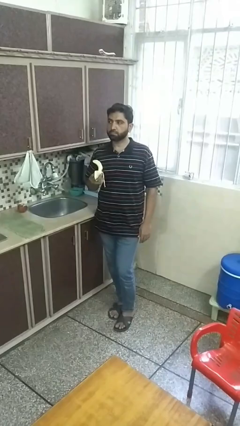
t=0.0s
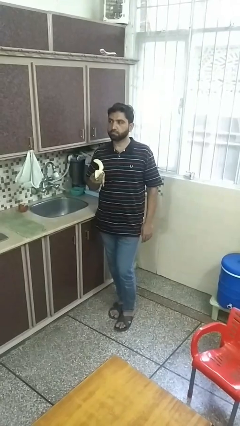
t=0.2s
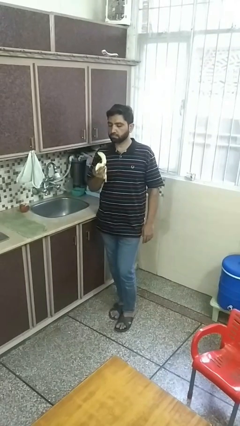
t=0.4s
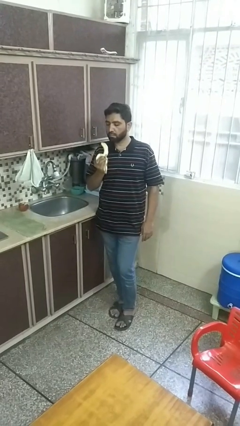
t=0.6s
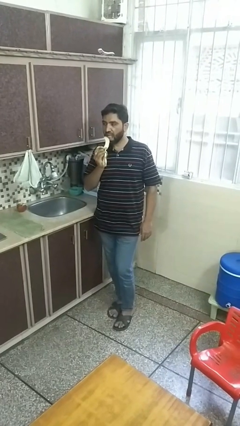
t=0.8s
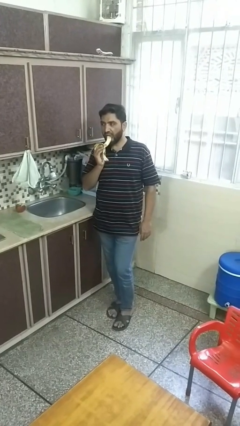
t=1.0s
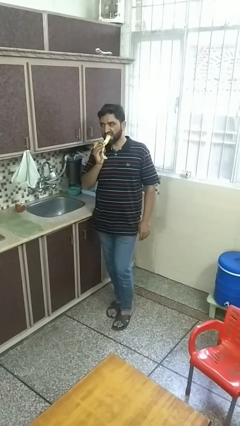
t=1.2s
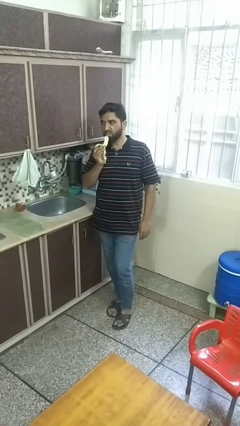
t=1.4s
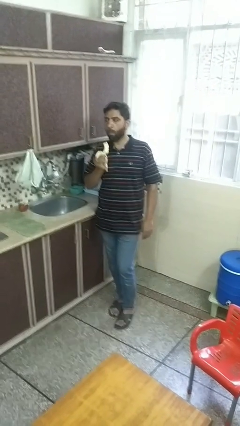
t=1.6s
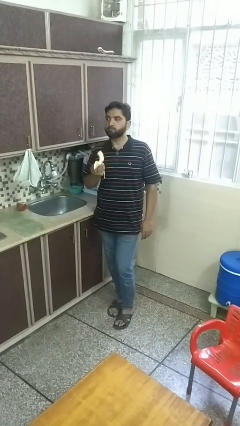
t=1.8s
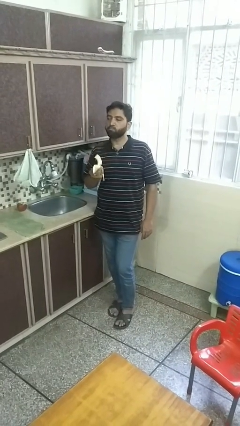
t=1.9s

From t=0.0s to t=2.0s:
person eats banana

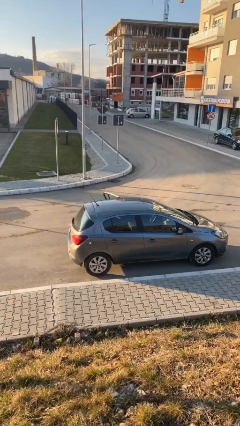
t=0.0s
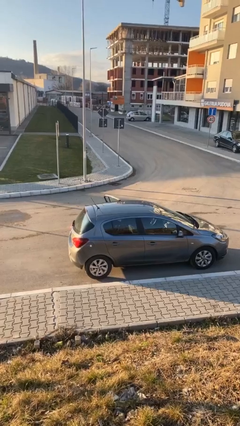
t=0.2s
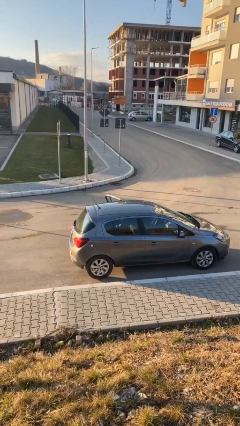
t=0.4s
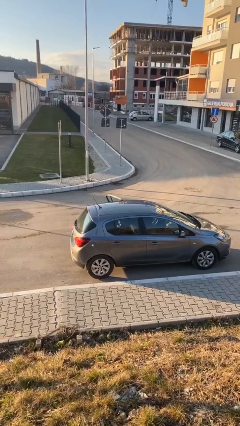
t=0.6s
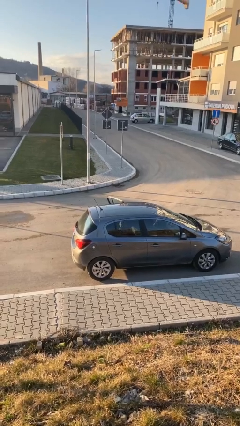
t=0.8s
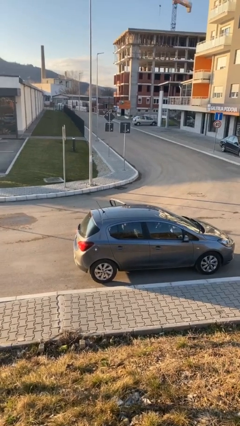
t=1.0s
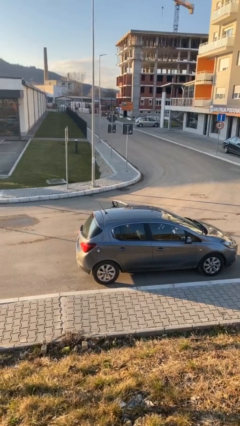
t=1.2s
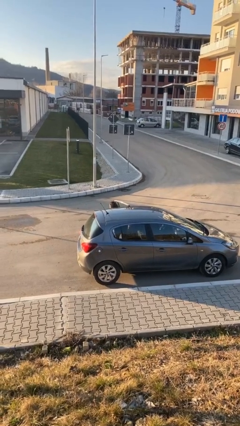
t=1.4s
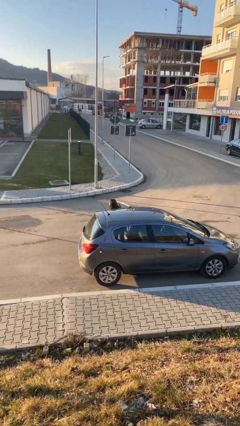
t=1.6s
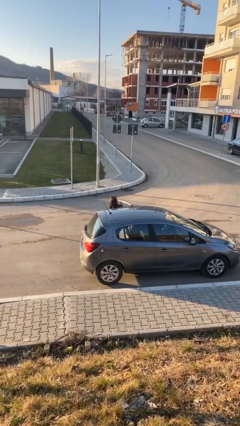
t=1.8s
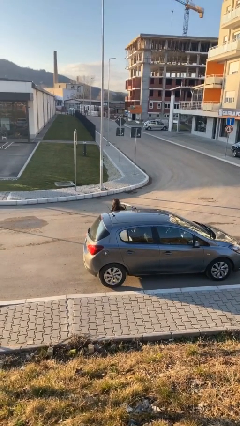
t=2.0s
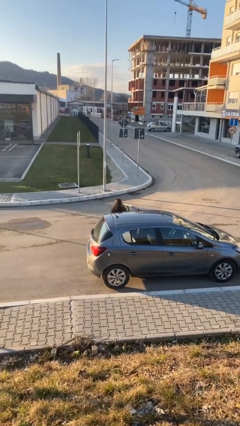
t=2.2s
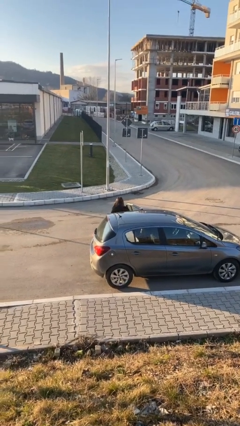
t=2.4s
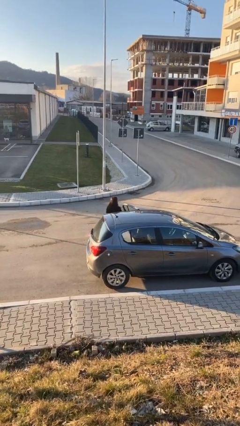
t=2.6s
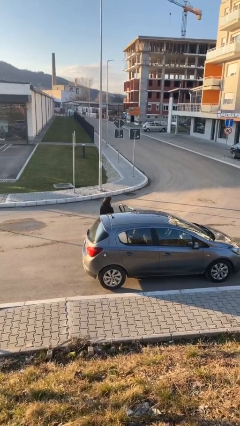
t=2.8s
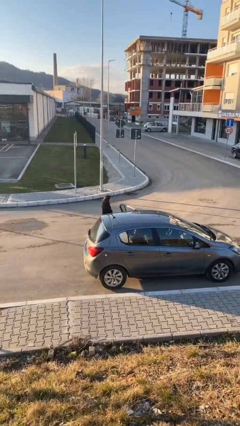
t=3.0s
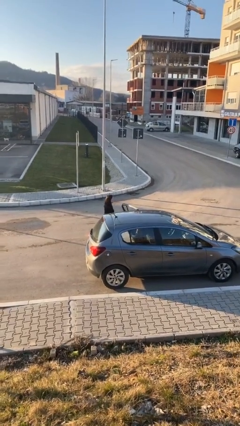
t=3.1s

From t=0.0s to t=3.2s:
person exits car

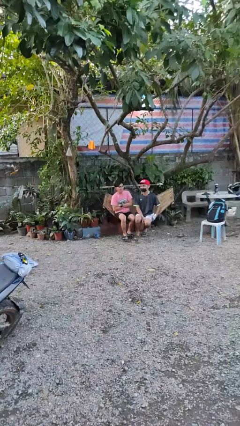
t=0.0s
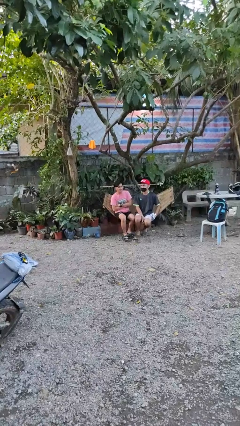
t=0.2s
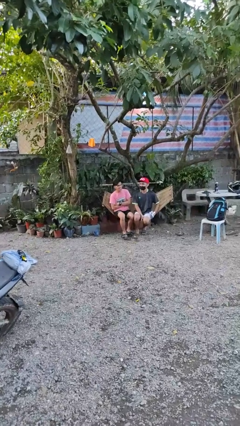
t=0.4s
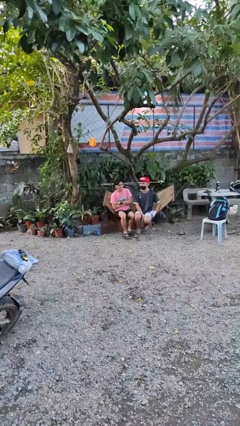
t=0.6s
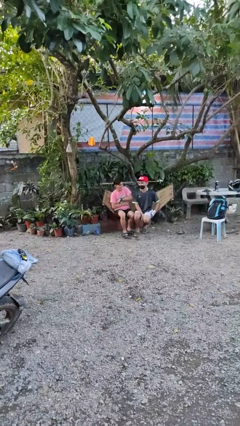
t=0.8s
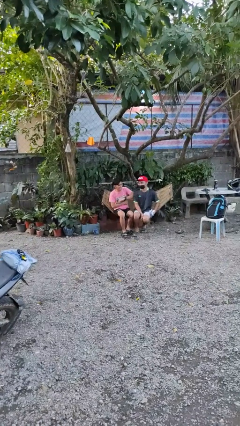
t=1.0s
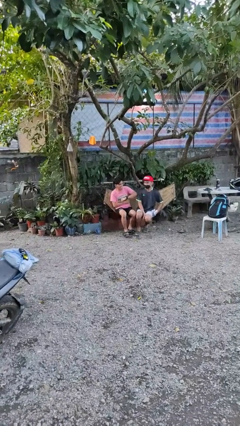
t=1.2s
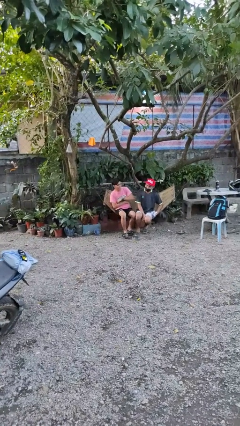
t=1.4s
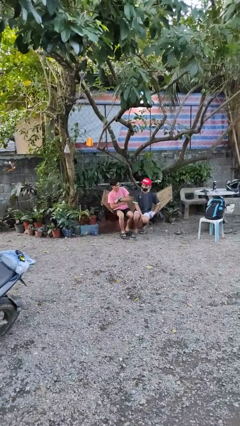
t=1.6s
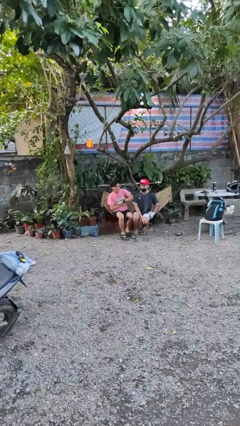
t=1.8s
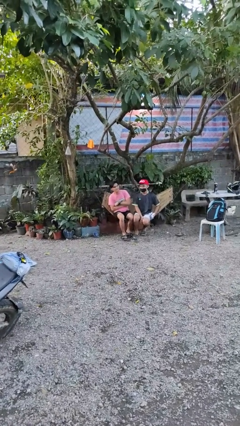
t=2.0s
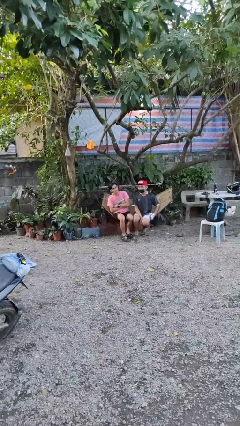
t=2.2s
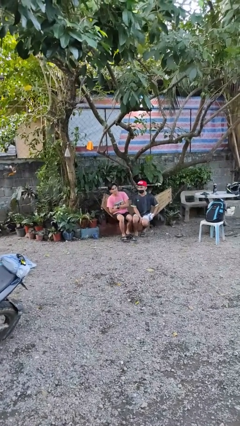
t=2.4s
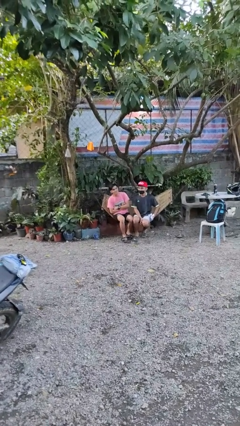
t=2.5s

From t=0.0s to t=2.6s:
person nudges person with elbow

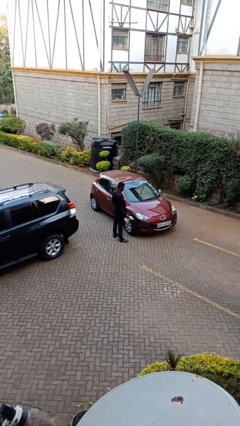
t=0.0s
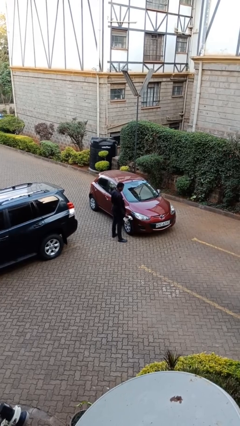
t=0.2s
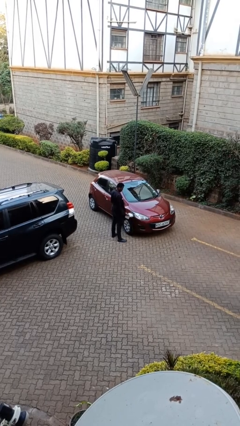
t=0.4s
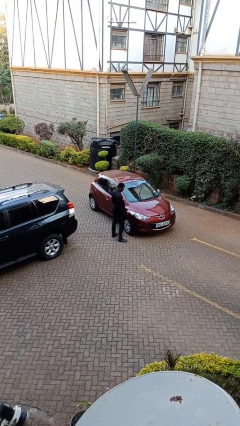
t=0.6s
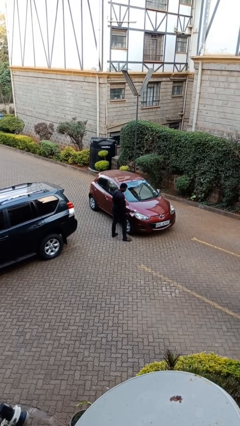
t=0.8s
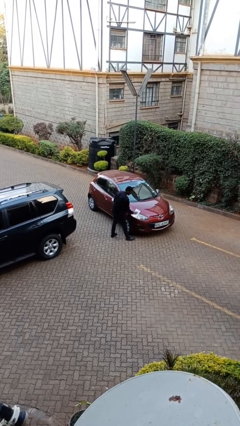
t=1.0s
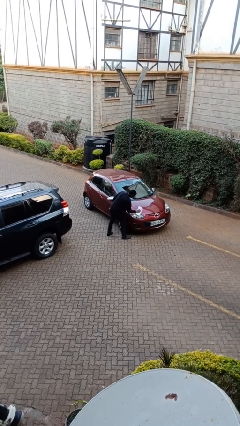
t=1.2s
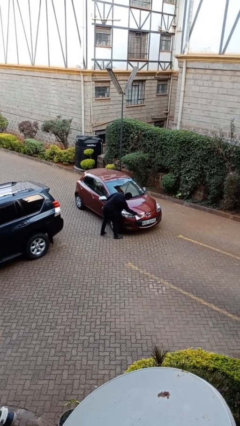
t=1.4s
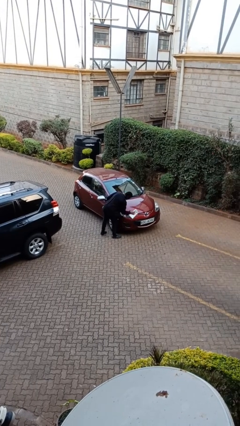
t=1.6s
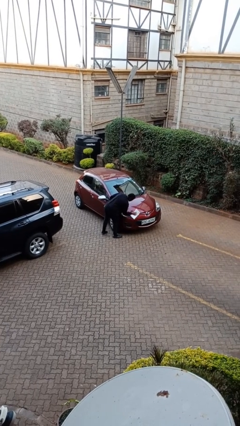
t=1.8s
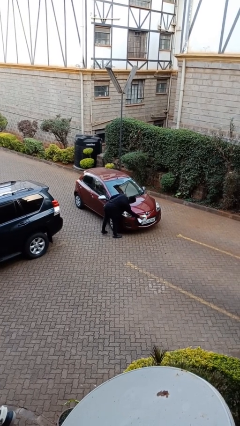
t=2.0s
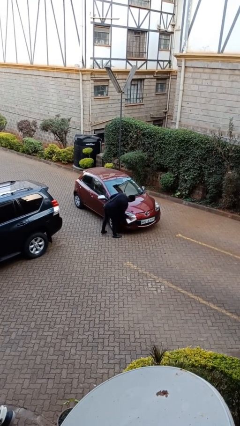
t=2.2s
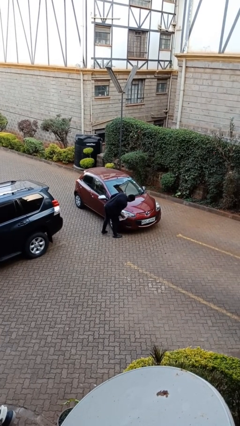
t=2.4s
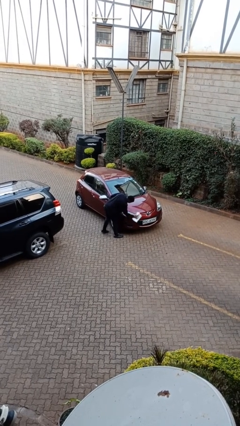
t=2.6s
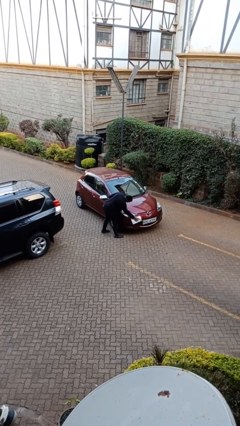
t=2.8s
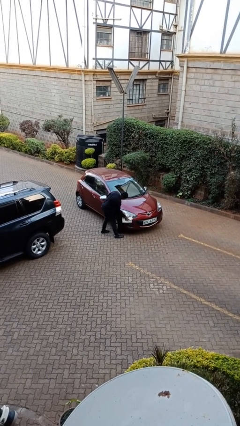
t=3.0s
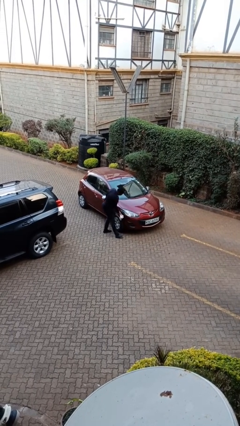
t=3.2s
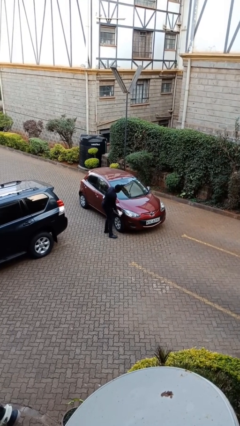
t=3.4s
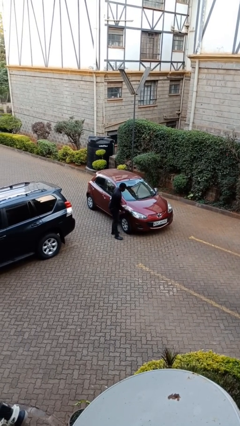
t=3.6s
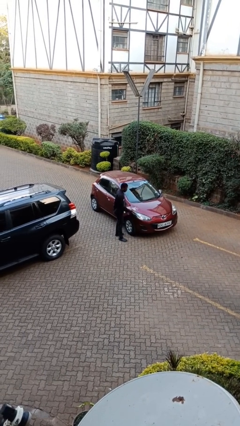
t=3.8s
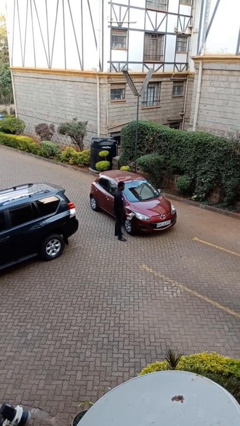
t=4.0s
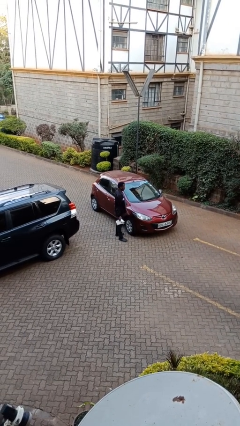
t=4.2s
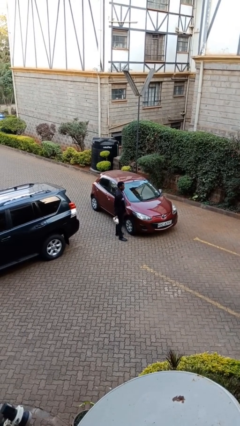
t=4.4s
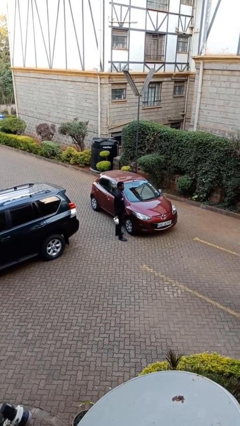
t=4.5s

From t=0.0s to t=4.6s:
person polishes car with rag

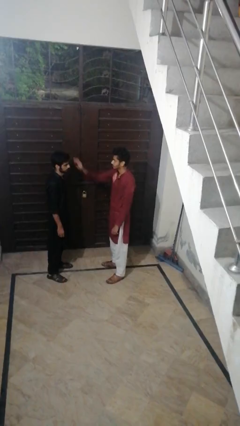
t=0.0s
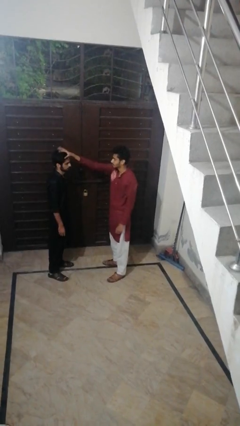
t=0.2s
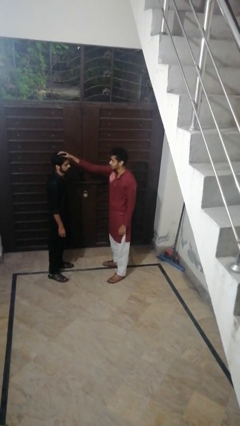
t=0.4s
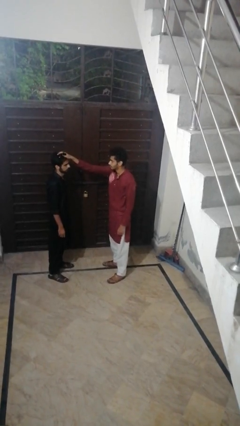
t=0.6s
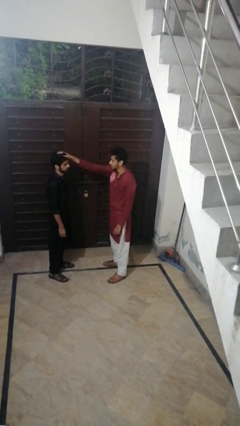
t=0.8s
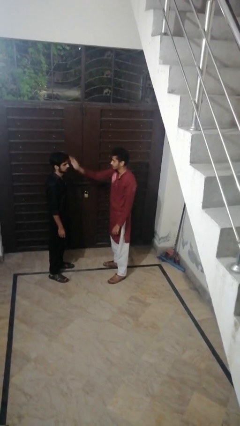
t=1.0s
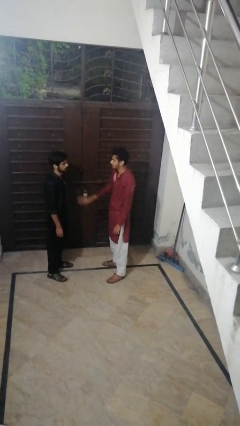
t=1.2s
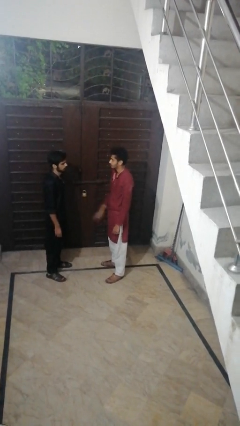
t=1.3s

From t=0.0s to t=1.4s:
person grabs person by hair

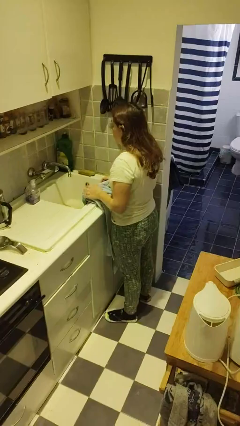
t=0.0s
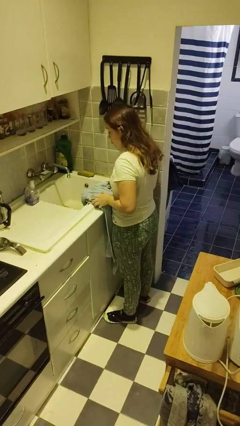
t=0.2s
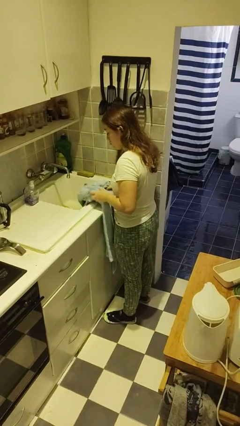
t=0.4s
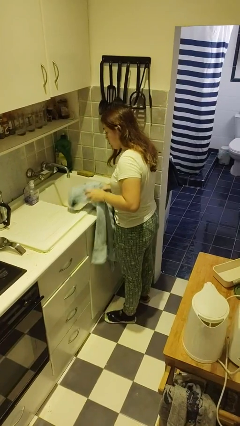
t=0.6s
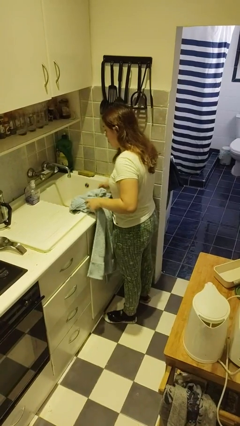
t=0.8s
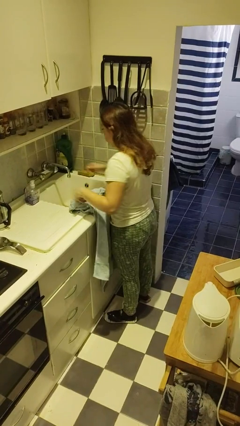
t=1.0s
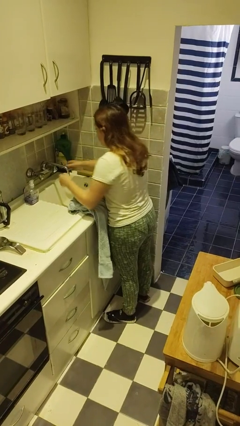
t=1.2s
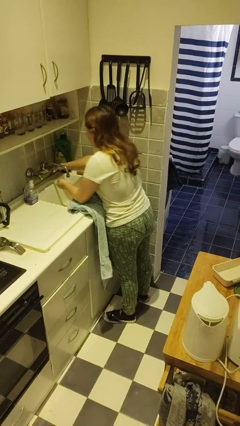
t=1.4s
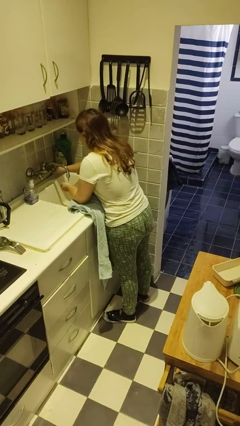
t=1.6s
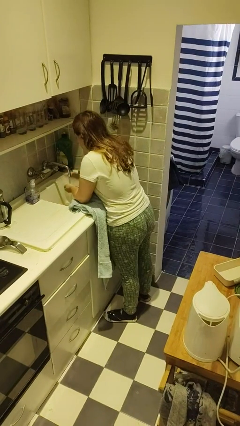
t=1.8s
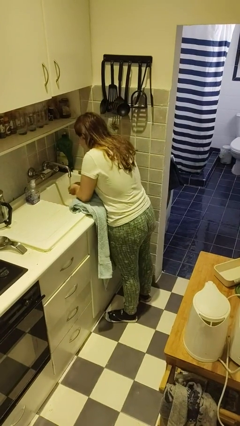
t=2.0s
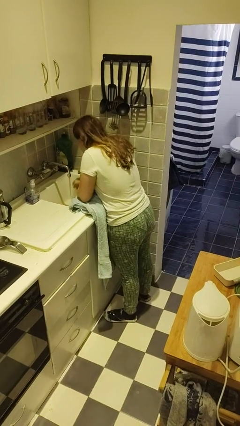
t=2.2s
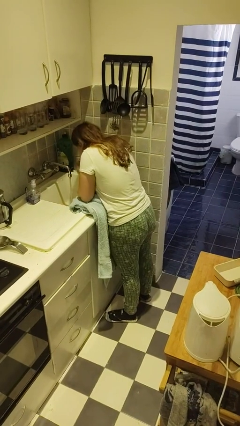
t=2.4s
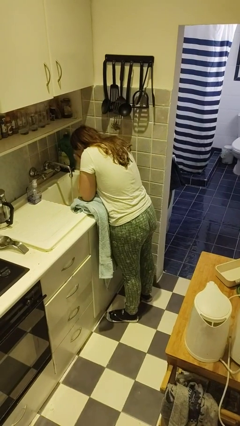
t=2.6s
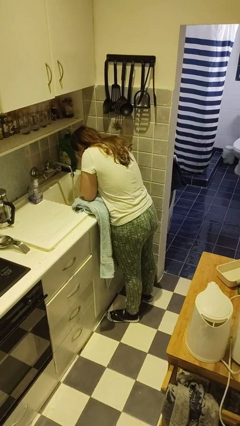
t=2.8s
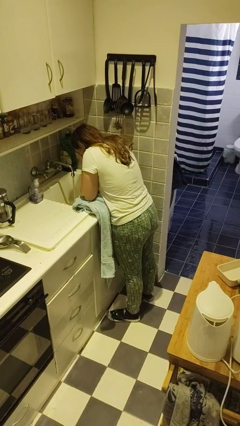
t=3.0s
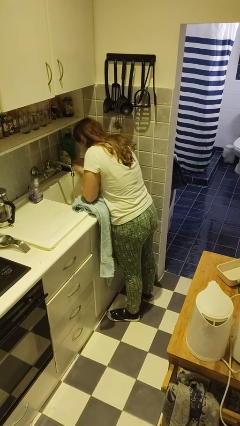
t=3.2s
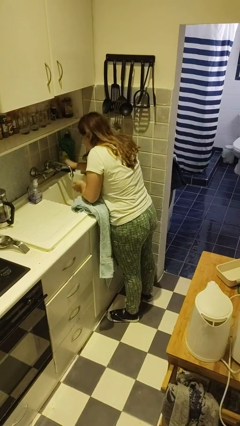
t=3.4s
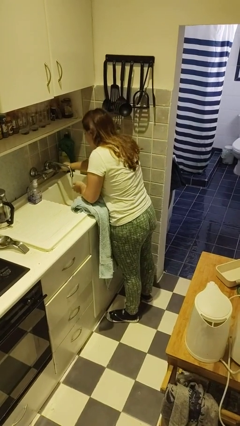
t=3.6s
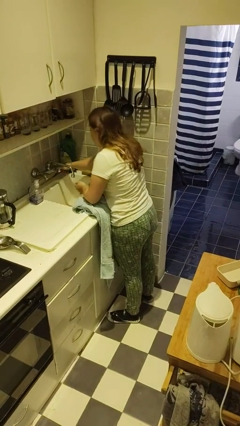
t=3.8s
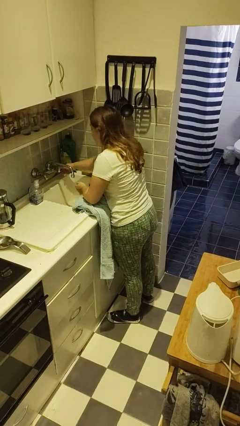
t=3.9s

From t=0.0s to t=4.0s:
person washes face
